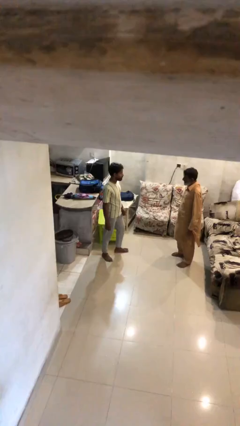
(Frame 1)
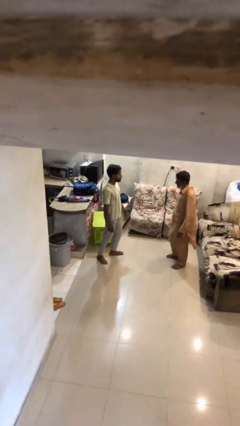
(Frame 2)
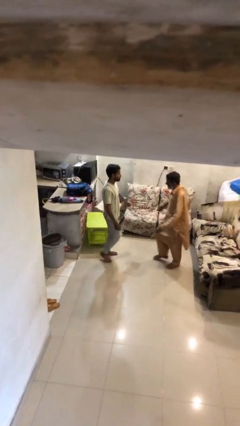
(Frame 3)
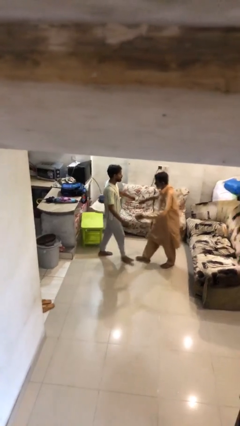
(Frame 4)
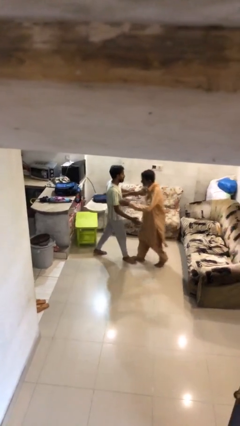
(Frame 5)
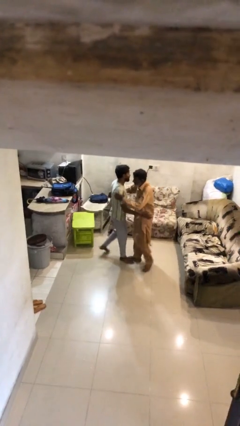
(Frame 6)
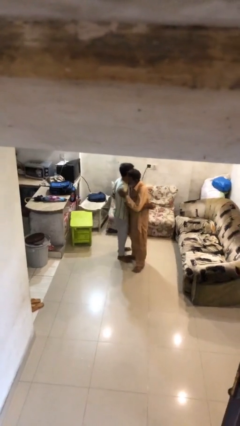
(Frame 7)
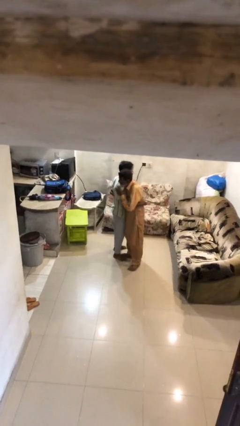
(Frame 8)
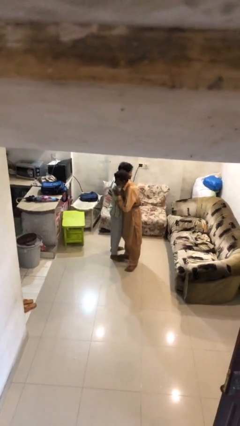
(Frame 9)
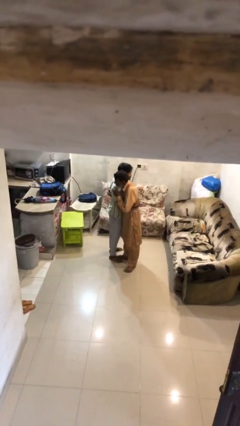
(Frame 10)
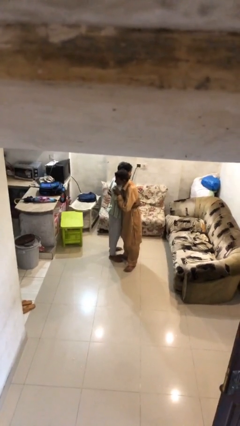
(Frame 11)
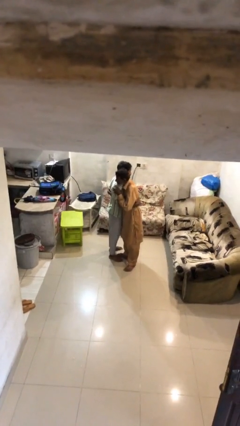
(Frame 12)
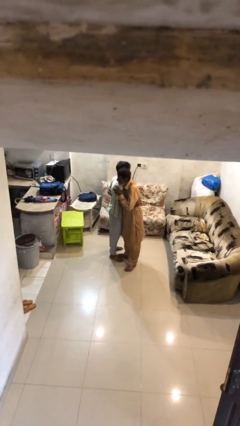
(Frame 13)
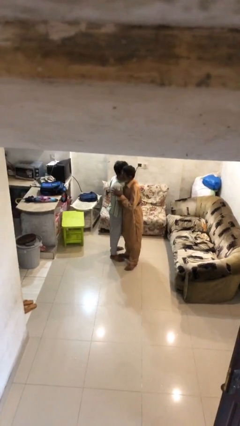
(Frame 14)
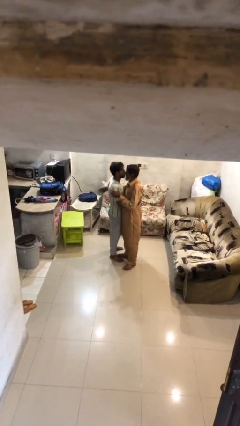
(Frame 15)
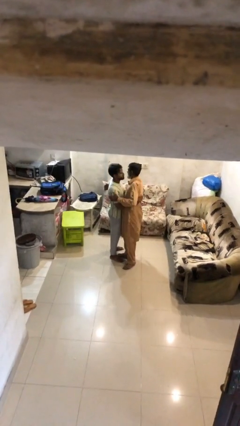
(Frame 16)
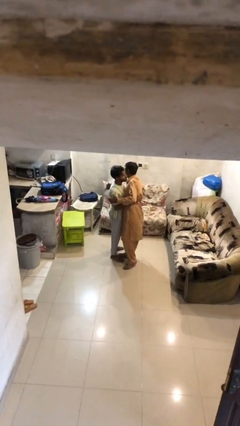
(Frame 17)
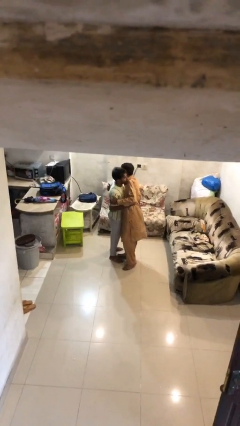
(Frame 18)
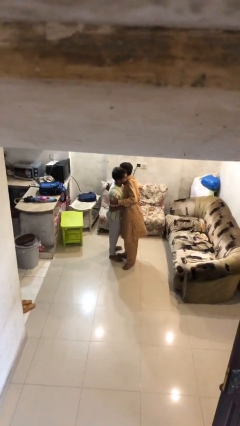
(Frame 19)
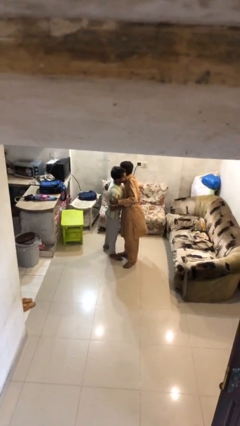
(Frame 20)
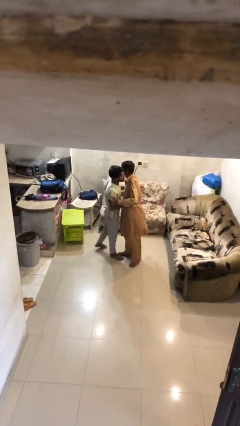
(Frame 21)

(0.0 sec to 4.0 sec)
person embraces person

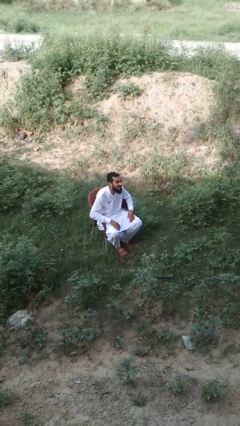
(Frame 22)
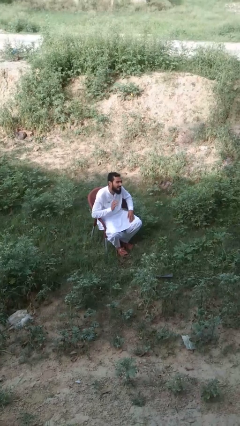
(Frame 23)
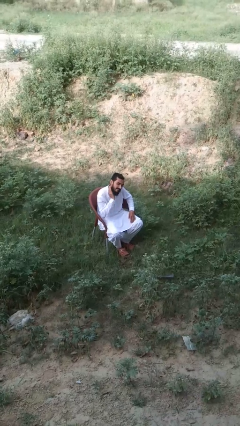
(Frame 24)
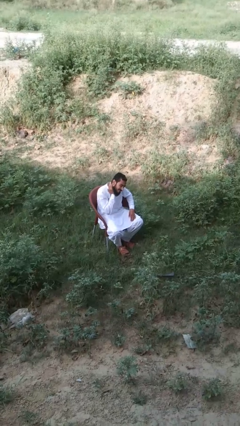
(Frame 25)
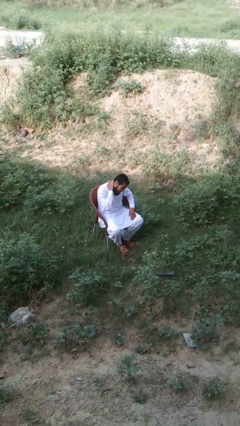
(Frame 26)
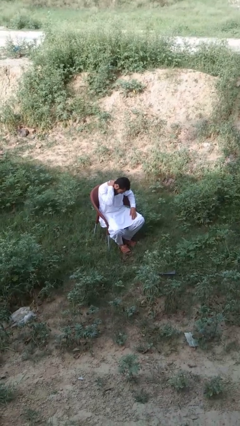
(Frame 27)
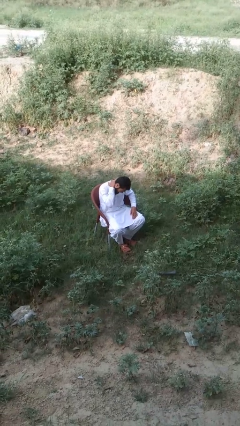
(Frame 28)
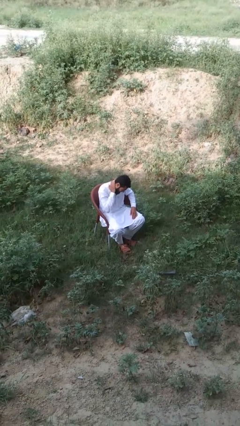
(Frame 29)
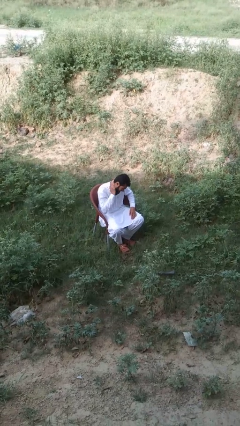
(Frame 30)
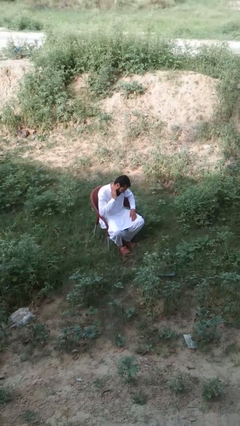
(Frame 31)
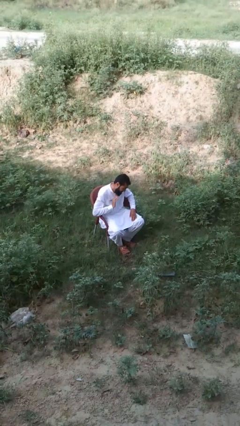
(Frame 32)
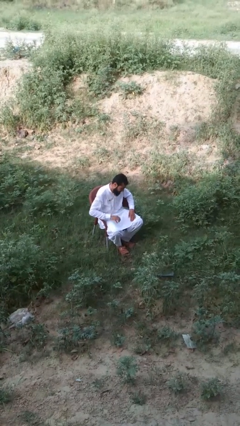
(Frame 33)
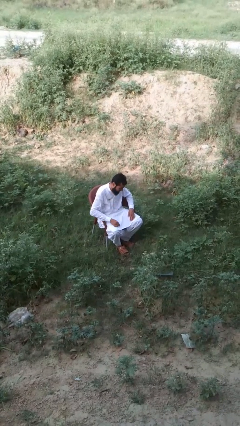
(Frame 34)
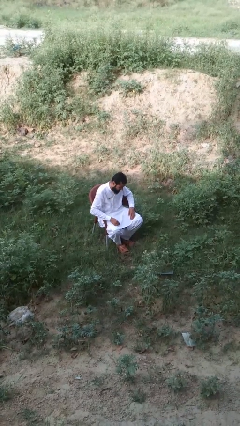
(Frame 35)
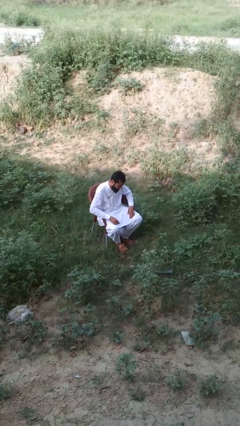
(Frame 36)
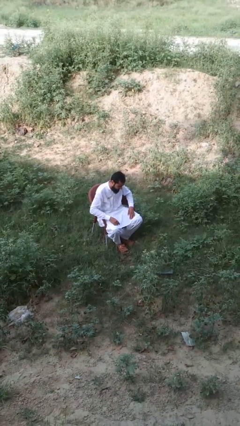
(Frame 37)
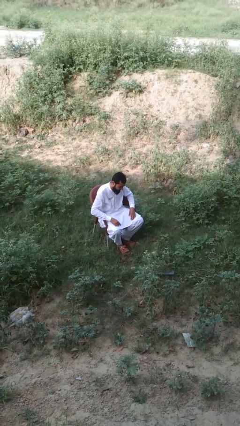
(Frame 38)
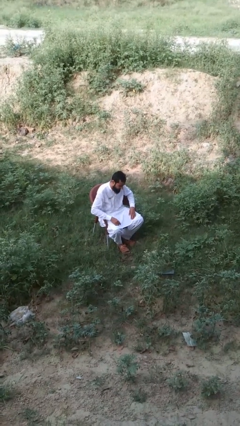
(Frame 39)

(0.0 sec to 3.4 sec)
person rubs neck

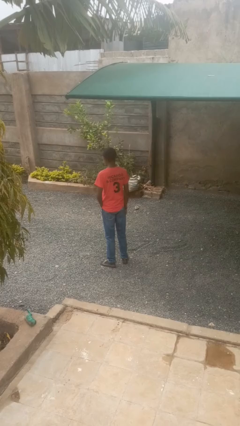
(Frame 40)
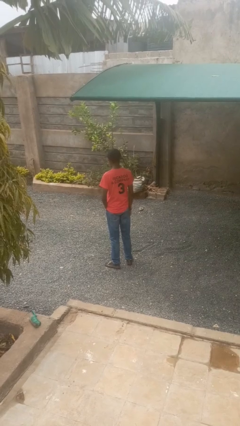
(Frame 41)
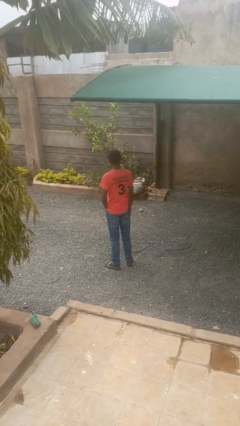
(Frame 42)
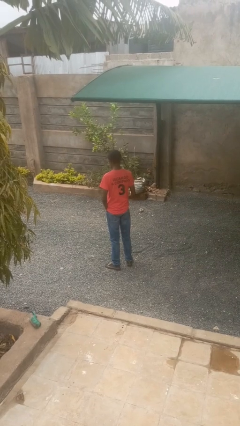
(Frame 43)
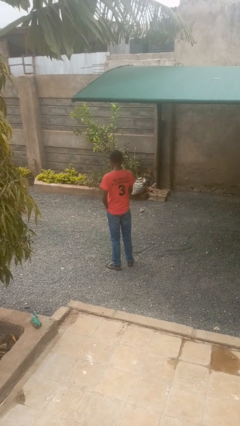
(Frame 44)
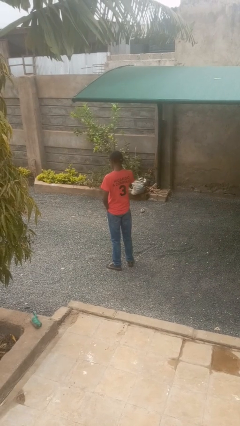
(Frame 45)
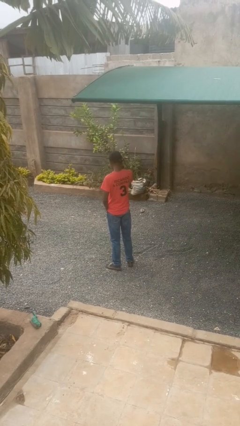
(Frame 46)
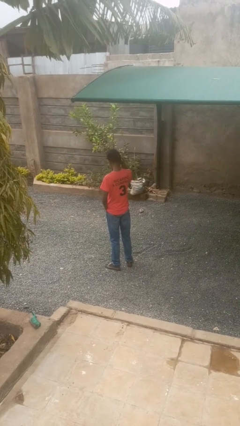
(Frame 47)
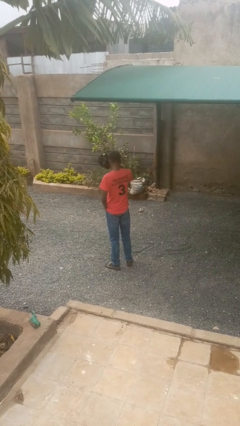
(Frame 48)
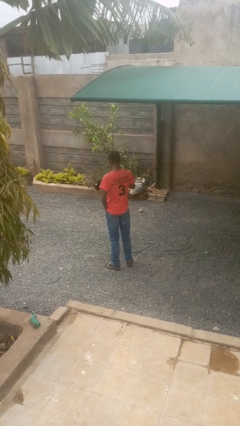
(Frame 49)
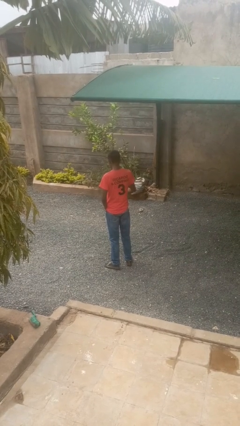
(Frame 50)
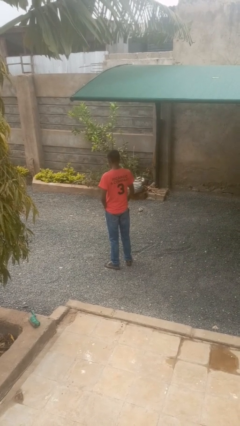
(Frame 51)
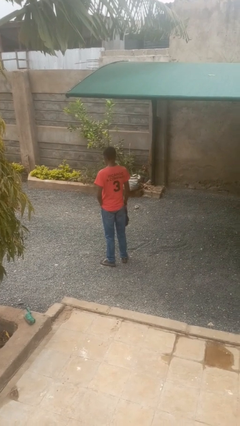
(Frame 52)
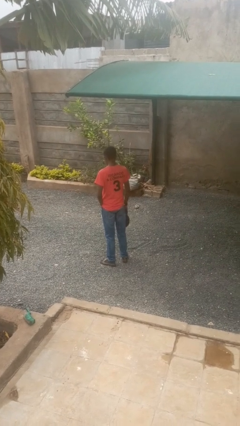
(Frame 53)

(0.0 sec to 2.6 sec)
person takes off hat

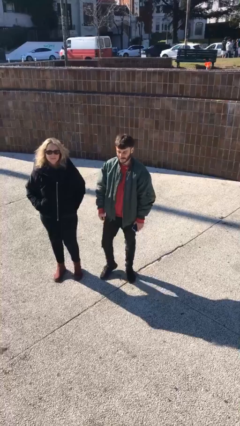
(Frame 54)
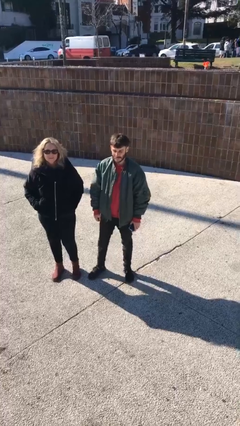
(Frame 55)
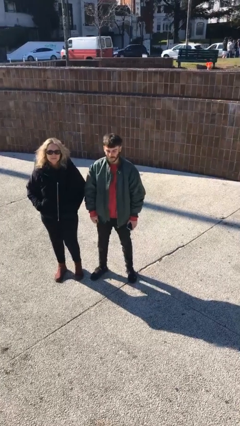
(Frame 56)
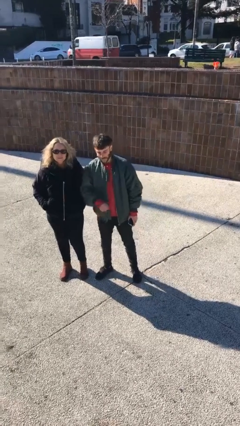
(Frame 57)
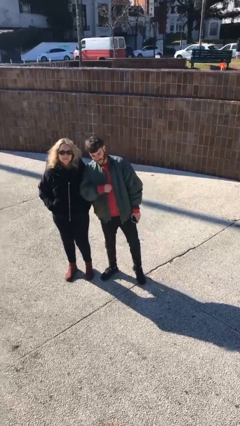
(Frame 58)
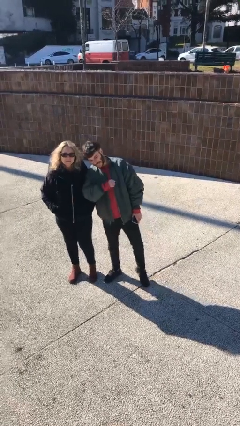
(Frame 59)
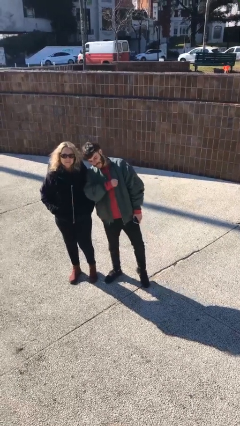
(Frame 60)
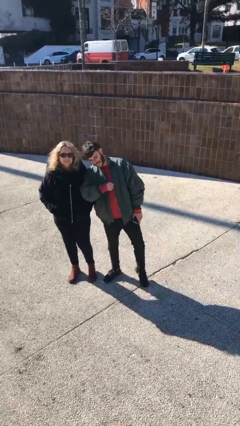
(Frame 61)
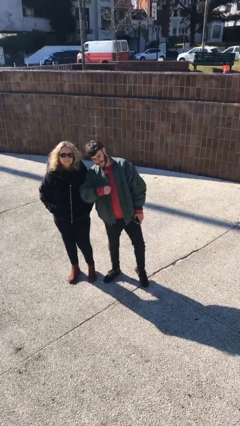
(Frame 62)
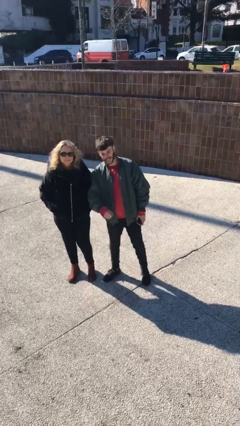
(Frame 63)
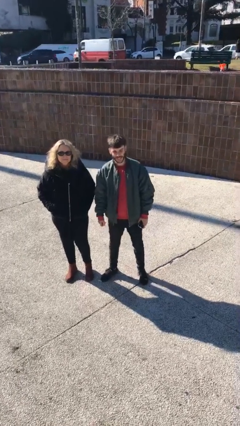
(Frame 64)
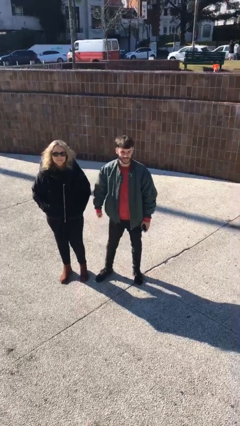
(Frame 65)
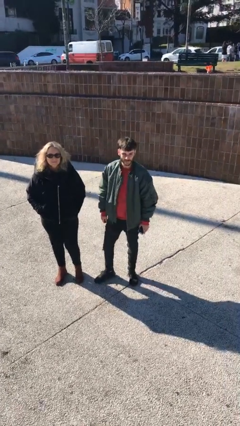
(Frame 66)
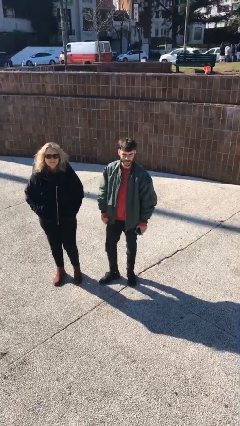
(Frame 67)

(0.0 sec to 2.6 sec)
person nudges person with elbow

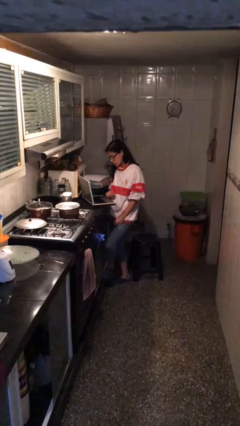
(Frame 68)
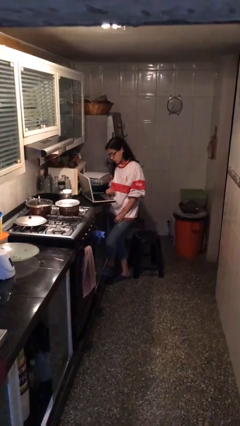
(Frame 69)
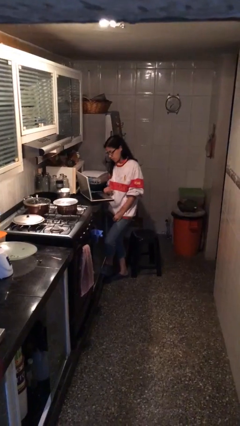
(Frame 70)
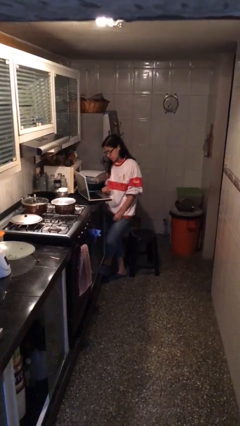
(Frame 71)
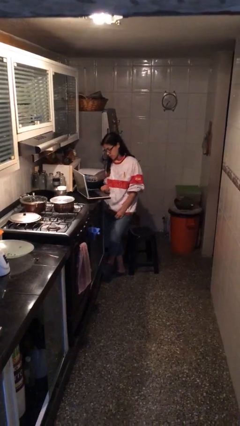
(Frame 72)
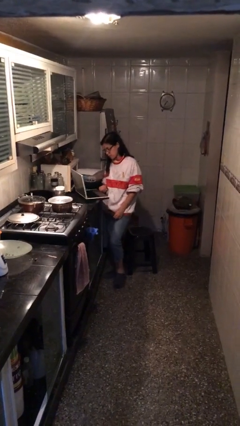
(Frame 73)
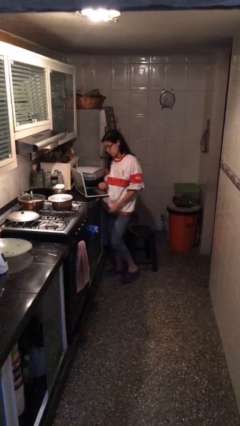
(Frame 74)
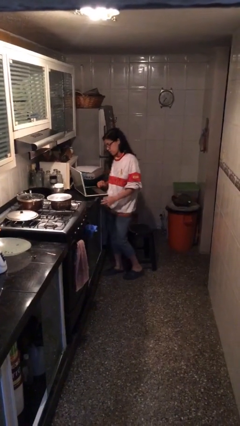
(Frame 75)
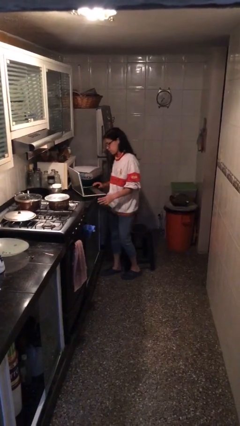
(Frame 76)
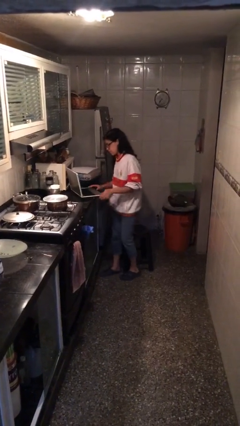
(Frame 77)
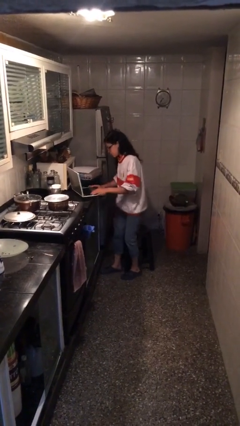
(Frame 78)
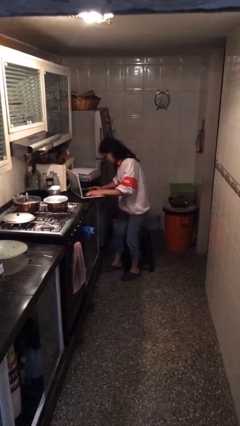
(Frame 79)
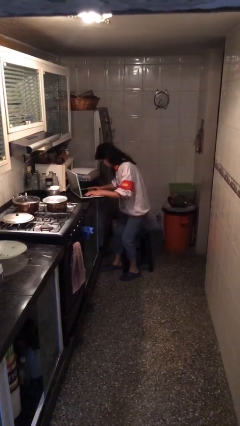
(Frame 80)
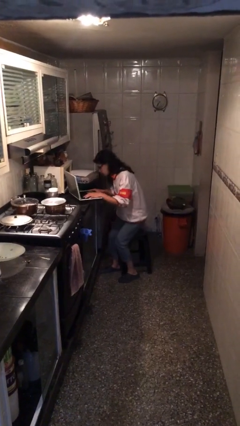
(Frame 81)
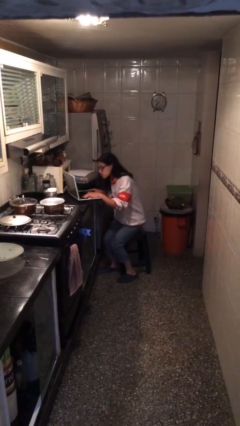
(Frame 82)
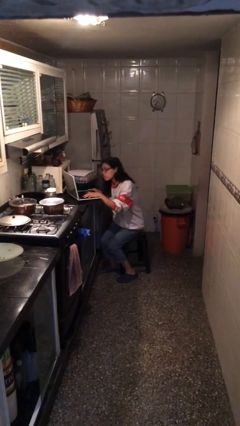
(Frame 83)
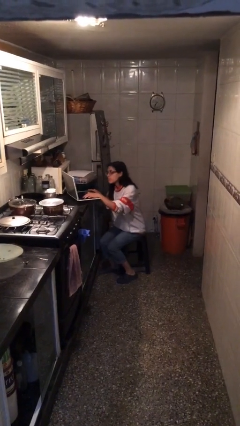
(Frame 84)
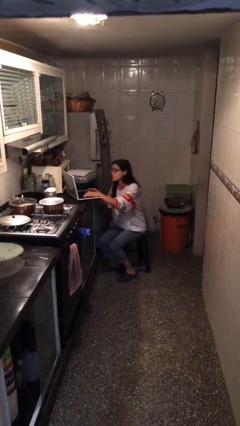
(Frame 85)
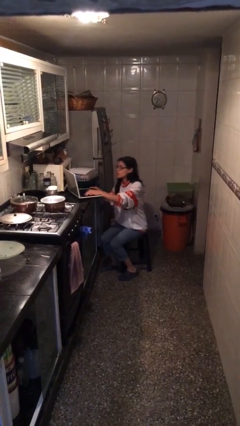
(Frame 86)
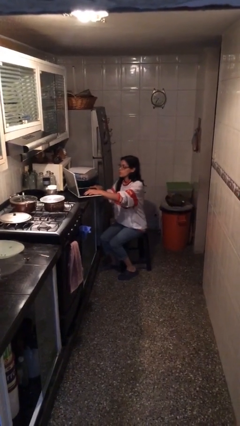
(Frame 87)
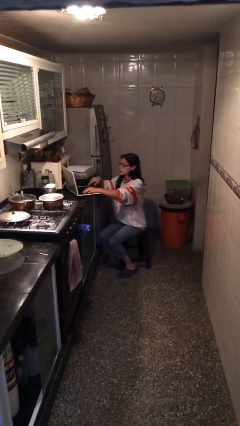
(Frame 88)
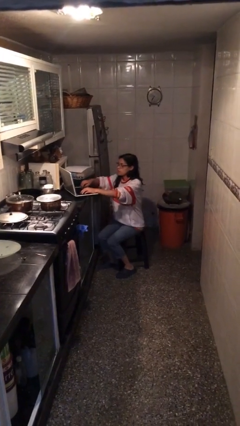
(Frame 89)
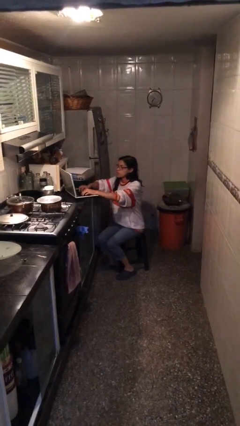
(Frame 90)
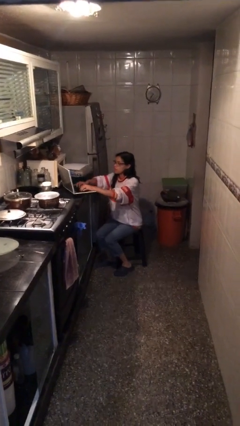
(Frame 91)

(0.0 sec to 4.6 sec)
person sits down
